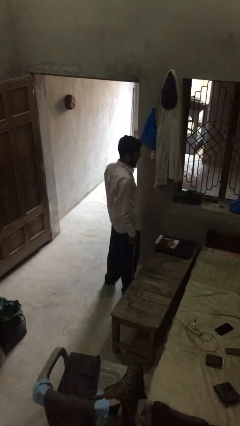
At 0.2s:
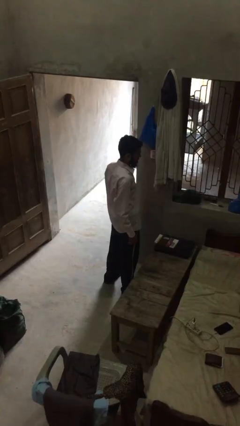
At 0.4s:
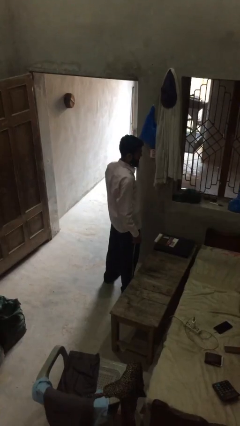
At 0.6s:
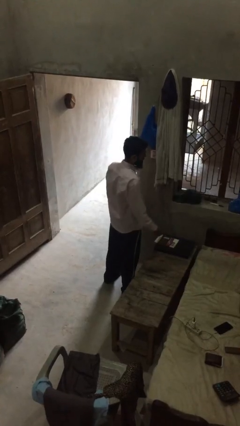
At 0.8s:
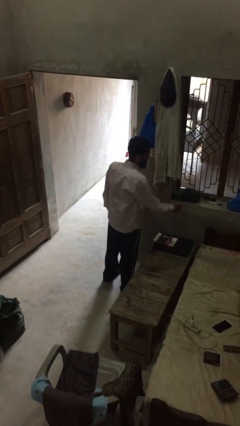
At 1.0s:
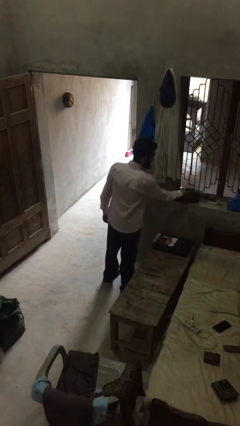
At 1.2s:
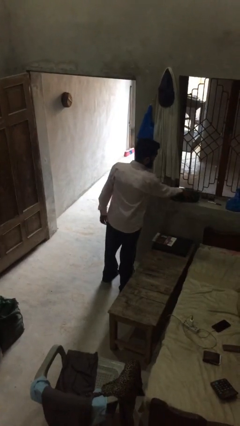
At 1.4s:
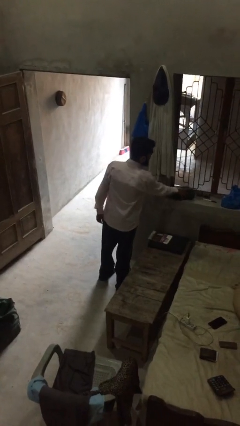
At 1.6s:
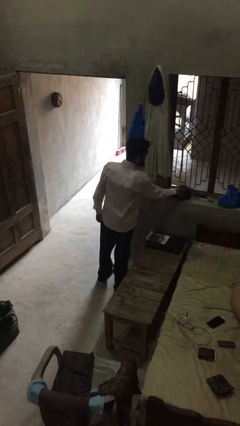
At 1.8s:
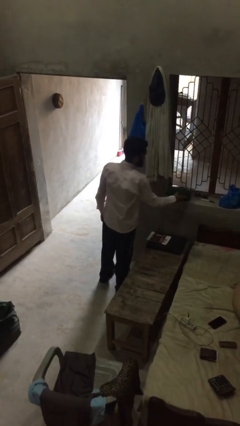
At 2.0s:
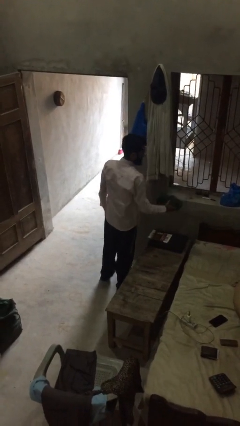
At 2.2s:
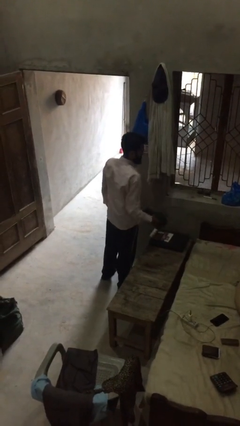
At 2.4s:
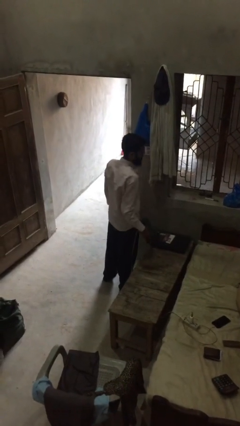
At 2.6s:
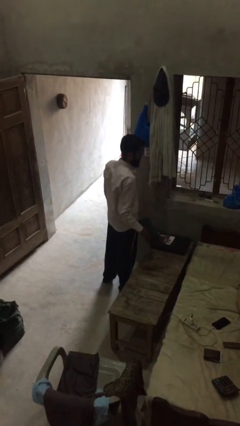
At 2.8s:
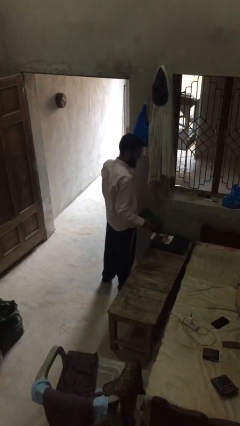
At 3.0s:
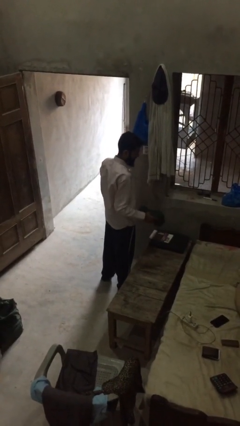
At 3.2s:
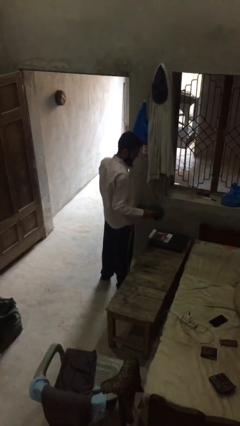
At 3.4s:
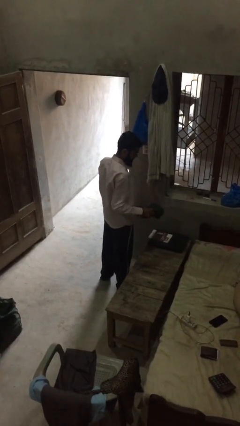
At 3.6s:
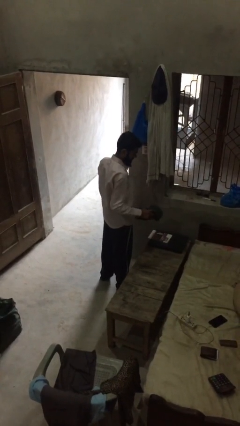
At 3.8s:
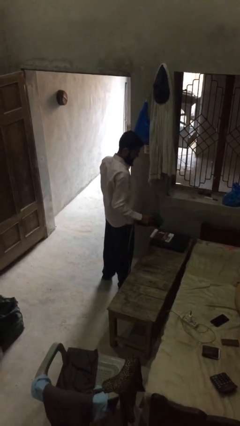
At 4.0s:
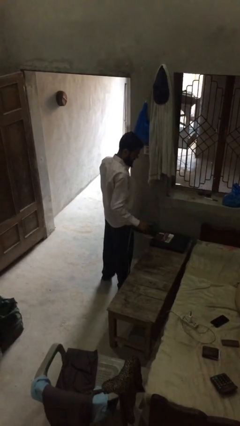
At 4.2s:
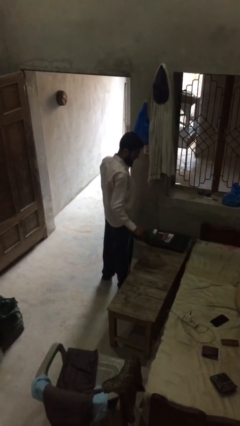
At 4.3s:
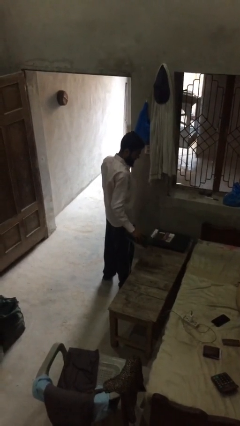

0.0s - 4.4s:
person picks up object from shelf

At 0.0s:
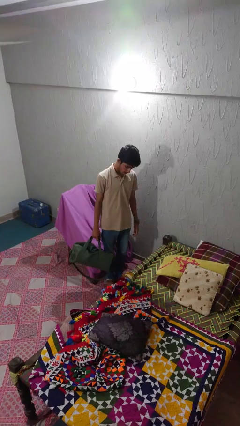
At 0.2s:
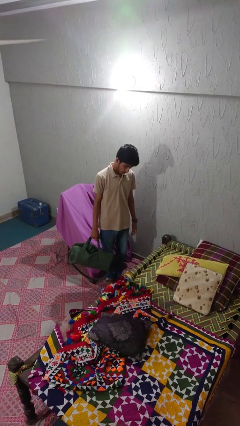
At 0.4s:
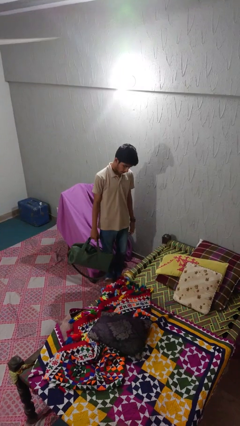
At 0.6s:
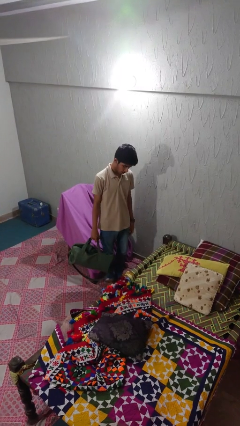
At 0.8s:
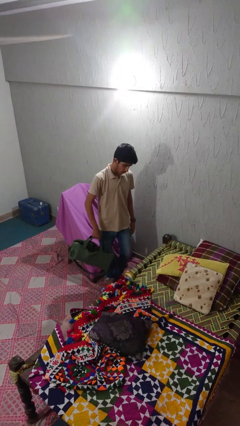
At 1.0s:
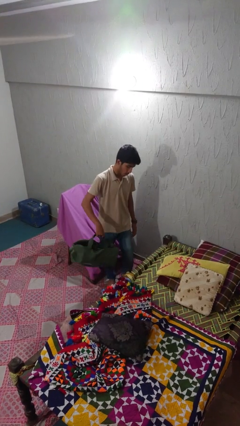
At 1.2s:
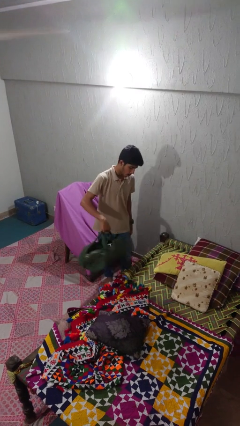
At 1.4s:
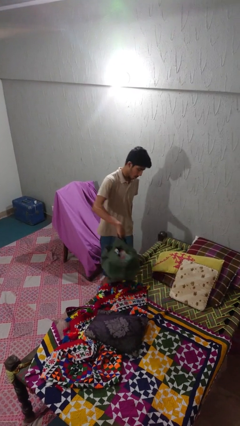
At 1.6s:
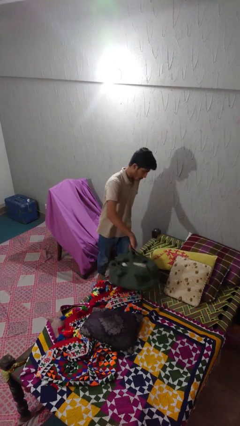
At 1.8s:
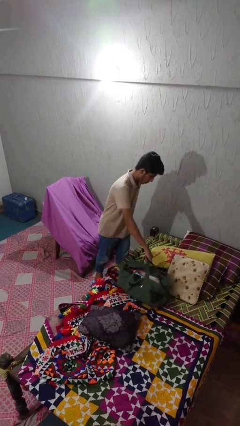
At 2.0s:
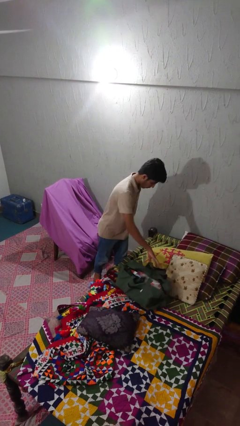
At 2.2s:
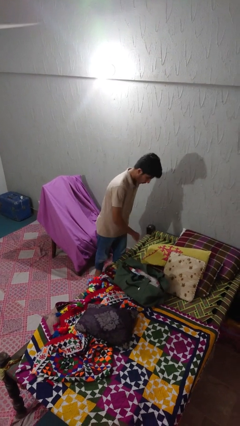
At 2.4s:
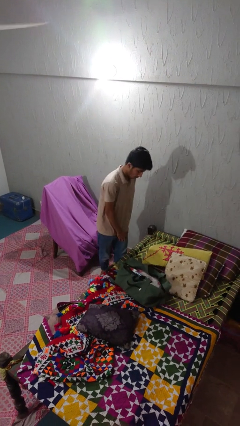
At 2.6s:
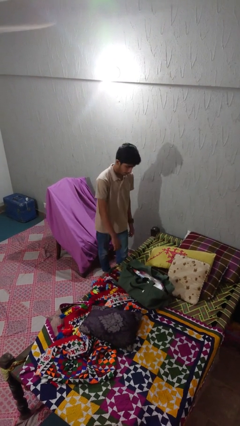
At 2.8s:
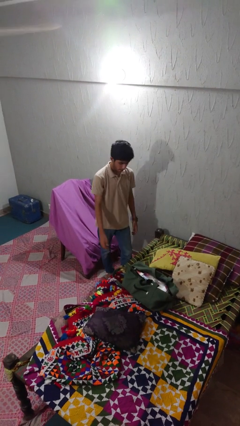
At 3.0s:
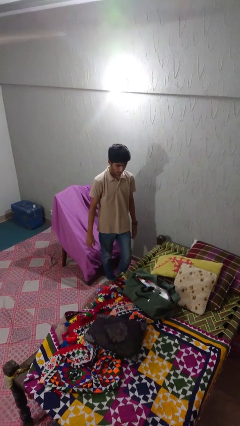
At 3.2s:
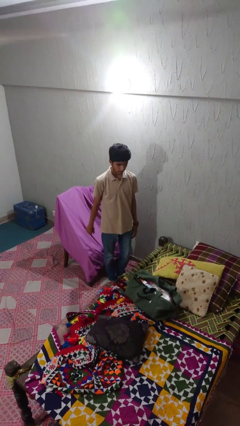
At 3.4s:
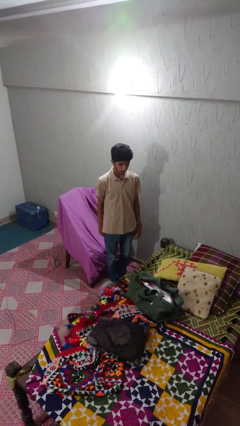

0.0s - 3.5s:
person puts down object on bed

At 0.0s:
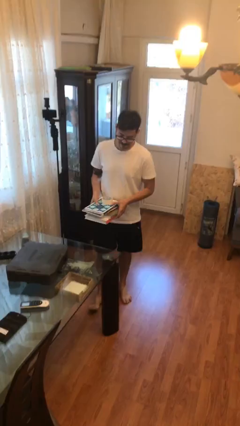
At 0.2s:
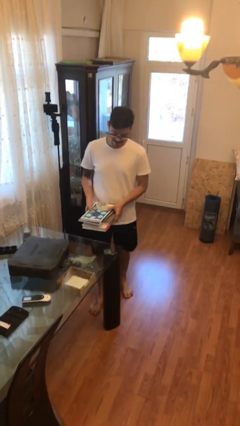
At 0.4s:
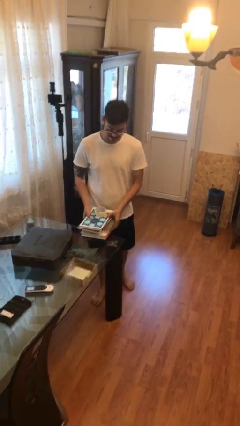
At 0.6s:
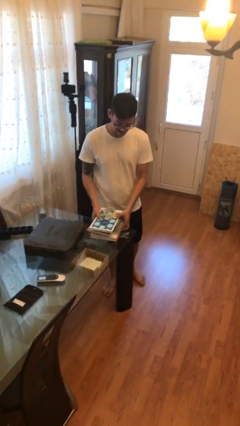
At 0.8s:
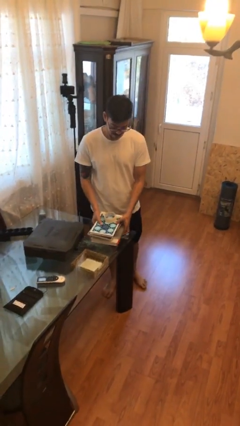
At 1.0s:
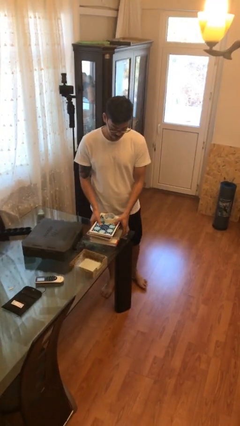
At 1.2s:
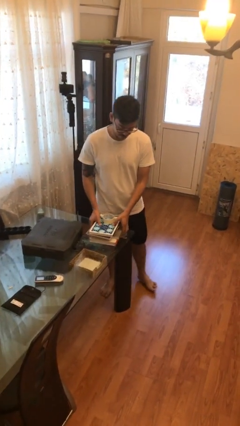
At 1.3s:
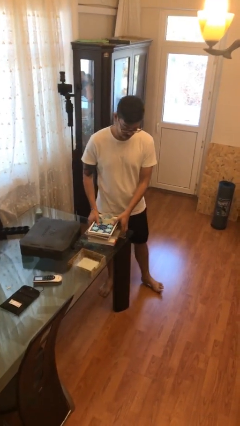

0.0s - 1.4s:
person puts down object on table

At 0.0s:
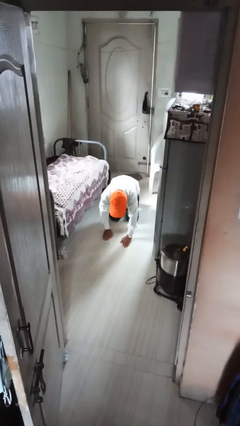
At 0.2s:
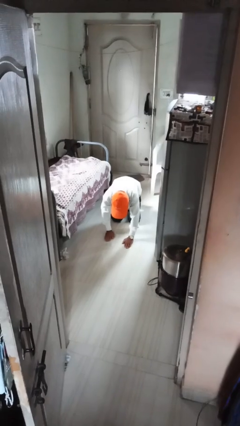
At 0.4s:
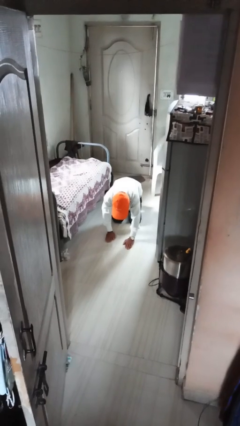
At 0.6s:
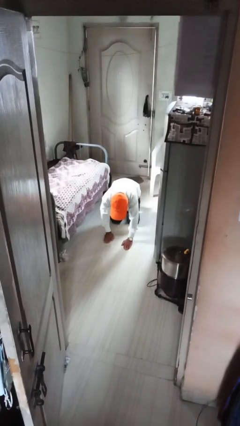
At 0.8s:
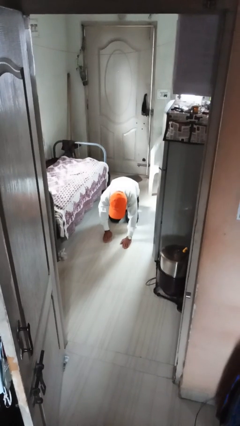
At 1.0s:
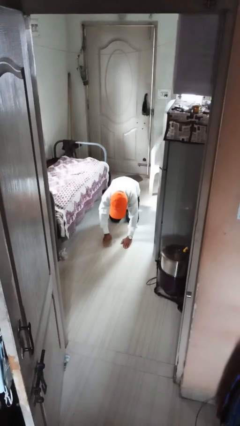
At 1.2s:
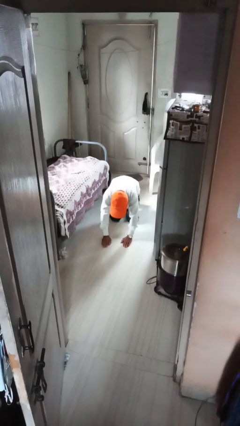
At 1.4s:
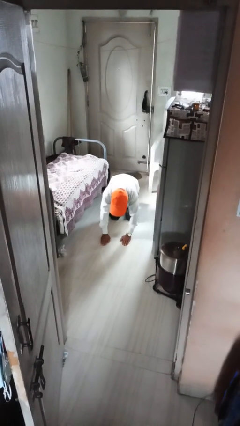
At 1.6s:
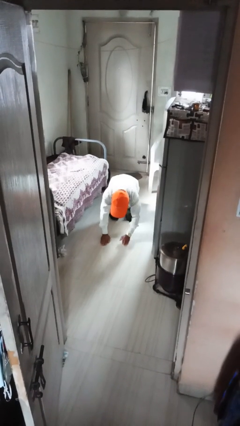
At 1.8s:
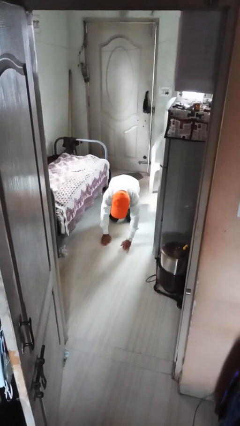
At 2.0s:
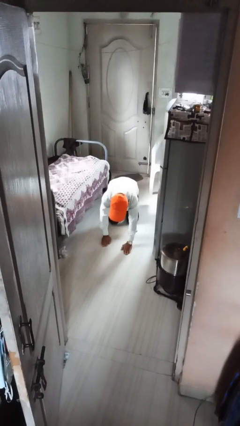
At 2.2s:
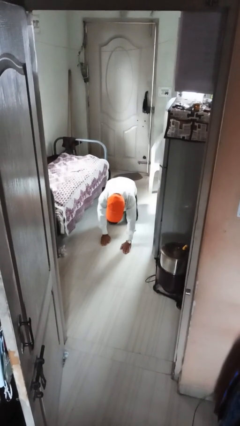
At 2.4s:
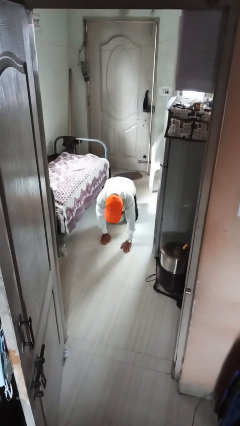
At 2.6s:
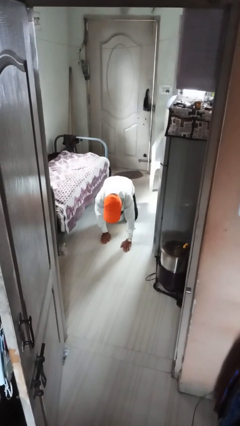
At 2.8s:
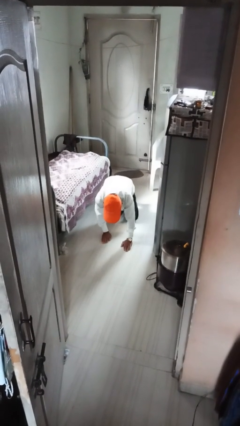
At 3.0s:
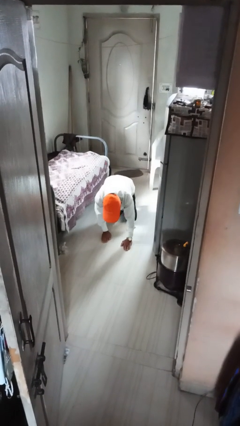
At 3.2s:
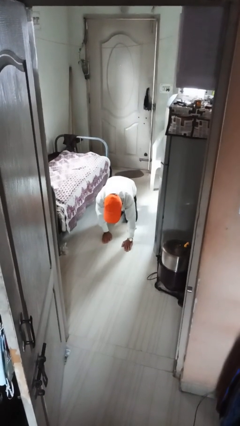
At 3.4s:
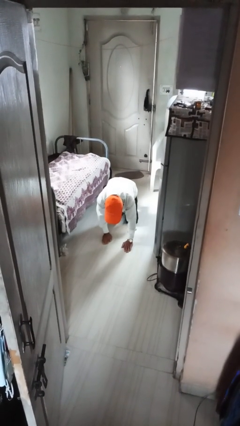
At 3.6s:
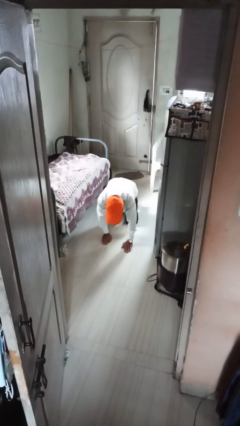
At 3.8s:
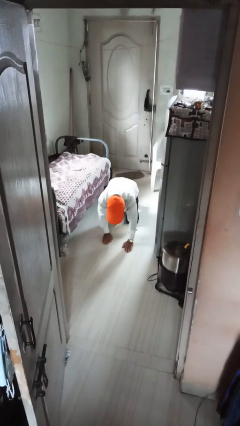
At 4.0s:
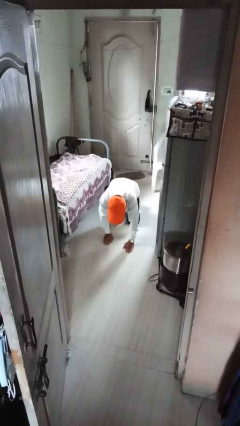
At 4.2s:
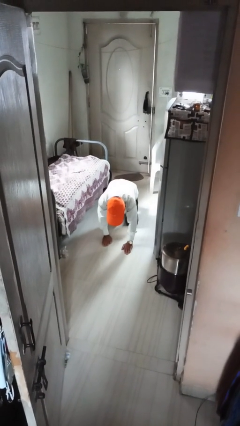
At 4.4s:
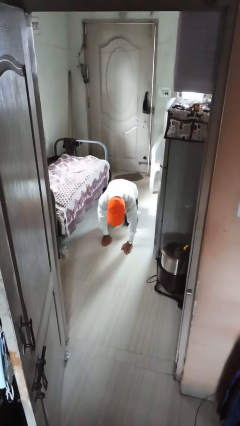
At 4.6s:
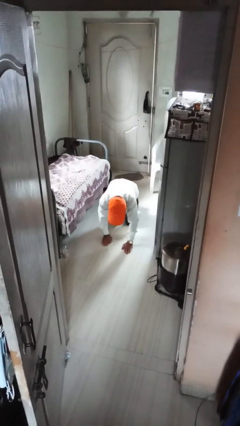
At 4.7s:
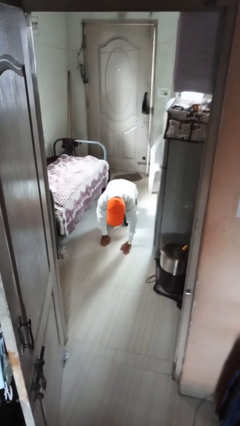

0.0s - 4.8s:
person crawls

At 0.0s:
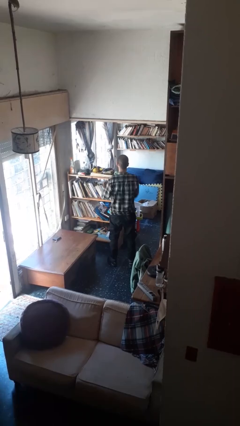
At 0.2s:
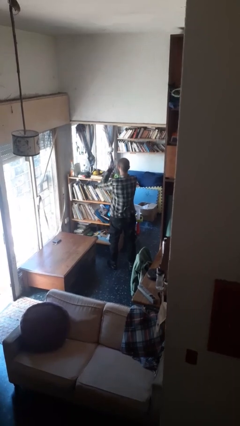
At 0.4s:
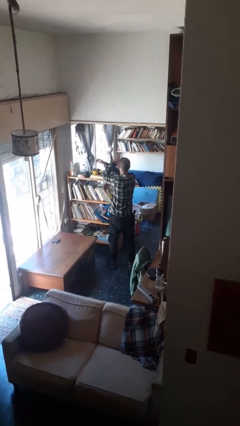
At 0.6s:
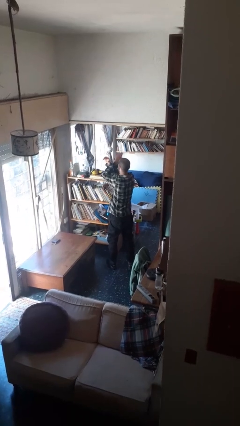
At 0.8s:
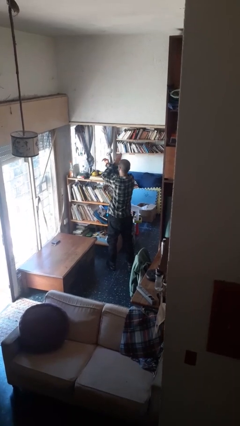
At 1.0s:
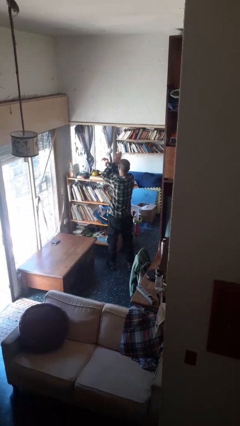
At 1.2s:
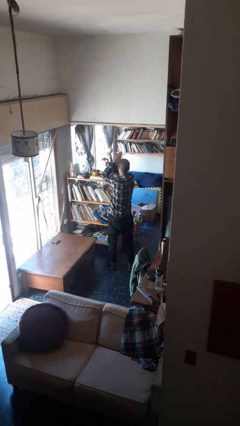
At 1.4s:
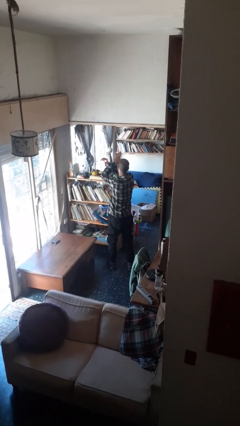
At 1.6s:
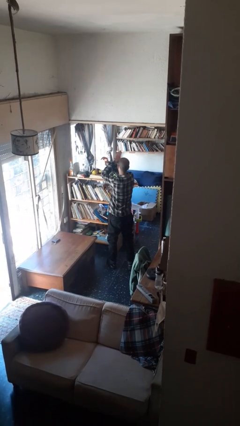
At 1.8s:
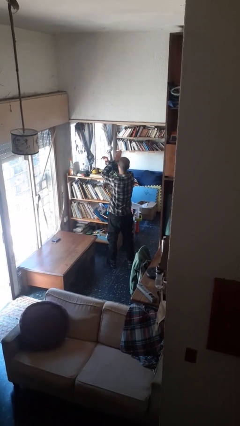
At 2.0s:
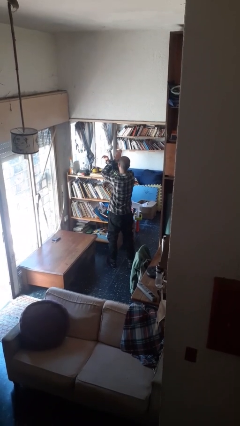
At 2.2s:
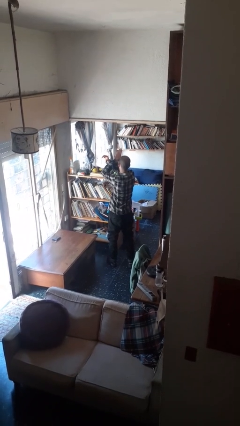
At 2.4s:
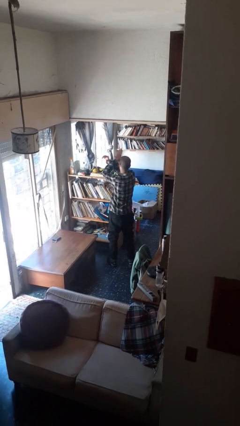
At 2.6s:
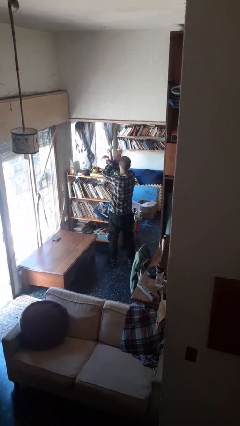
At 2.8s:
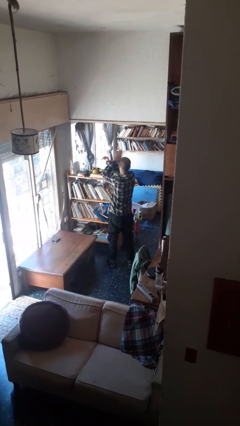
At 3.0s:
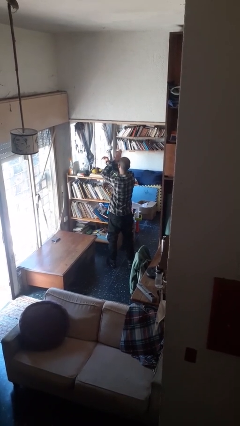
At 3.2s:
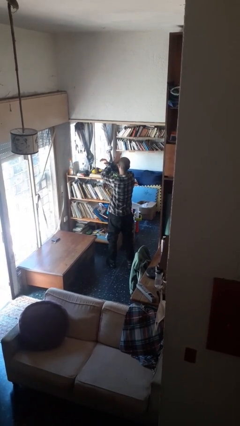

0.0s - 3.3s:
person gestures arms x

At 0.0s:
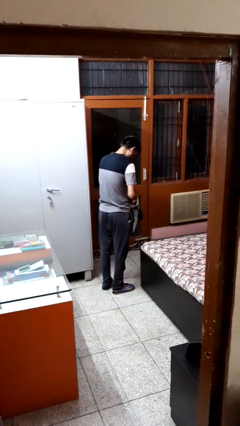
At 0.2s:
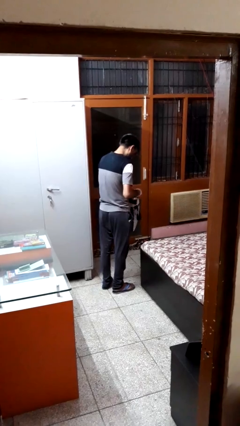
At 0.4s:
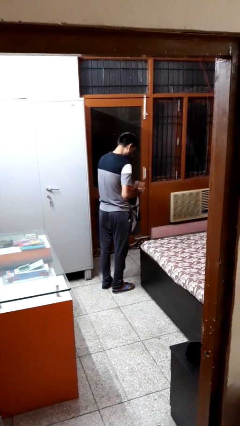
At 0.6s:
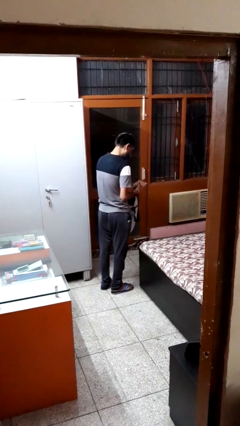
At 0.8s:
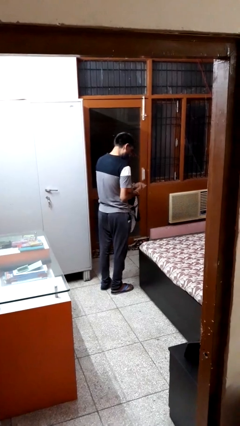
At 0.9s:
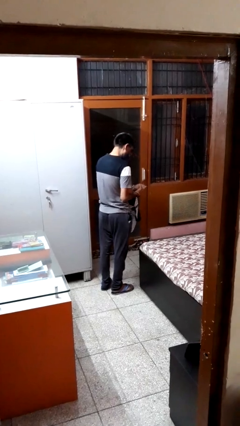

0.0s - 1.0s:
person takes object from bag
